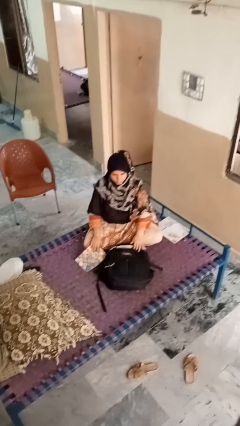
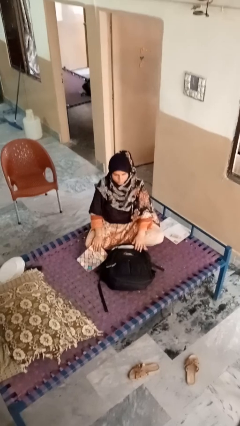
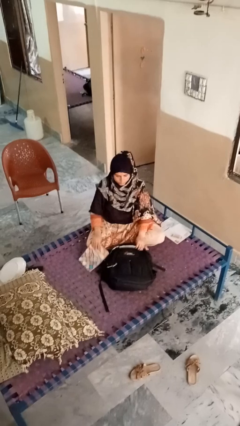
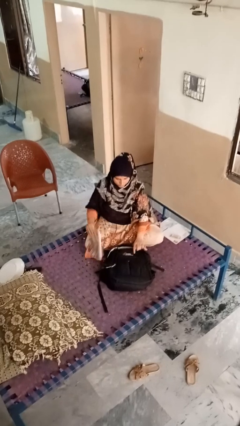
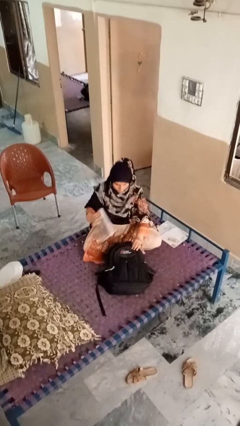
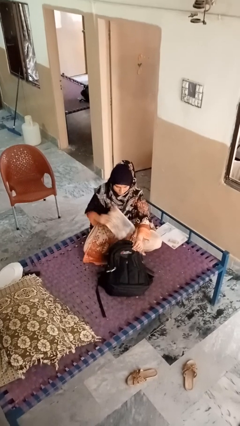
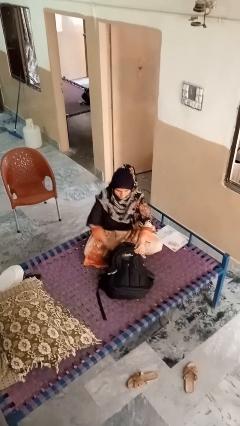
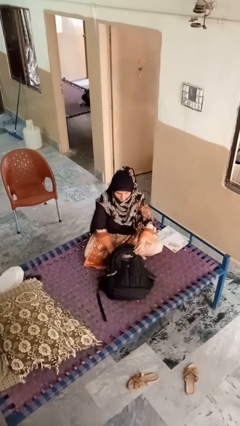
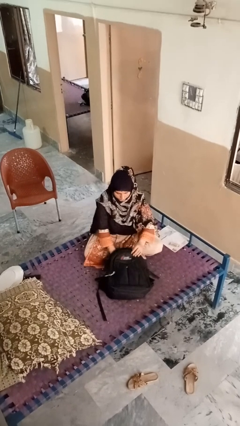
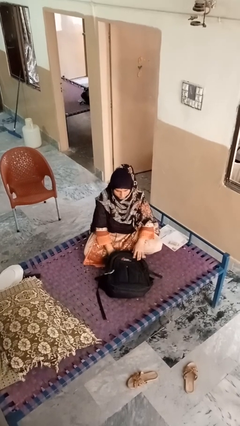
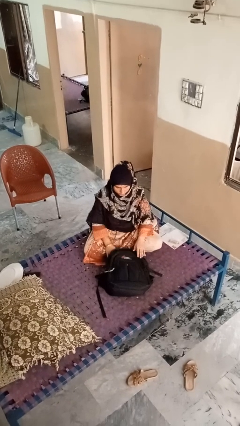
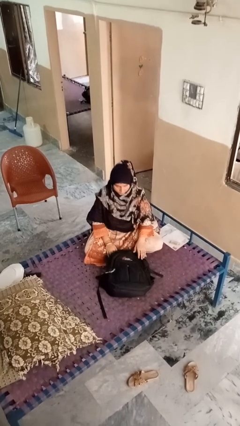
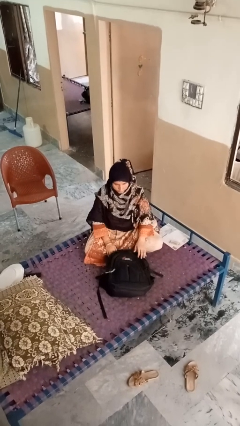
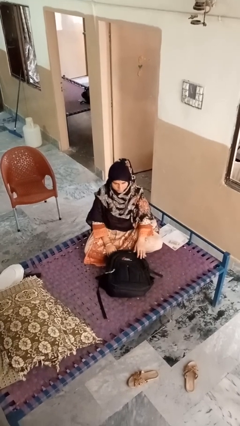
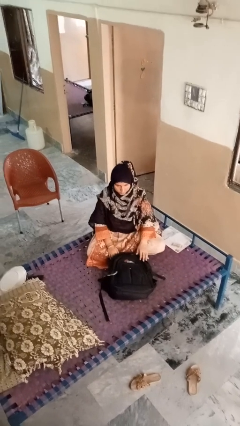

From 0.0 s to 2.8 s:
person puts object into bag

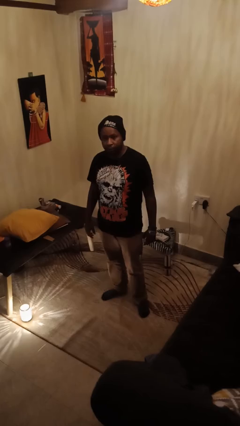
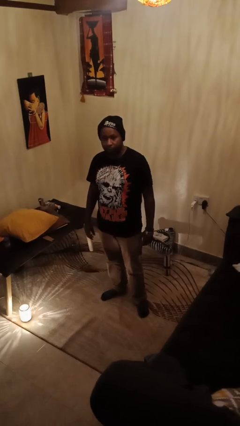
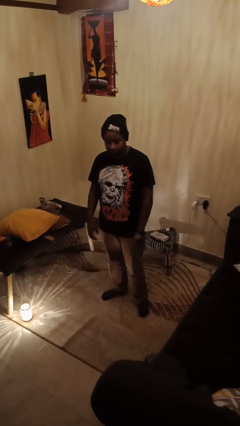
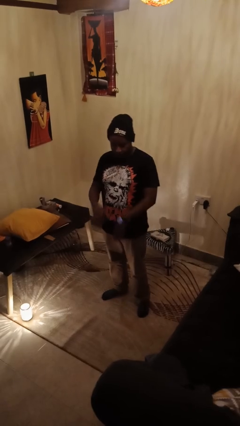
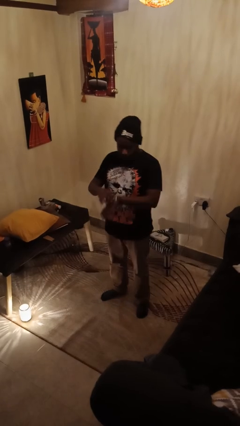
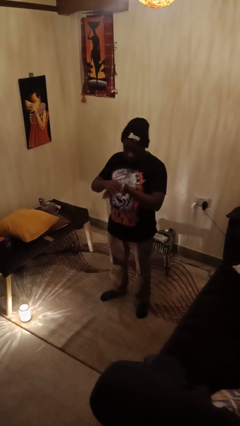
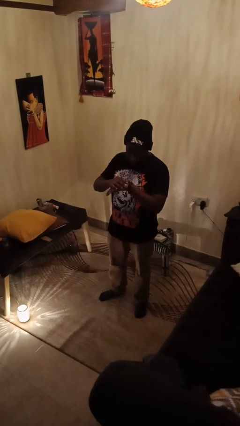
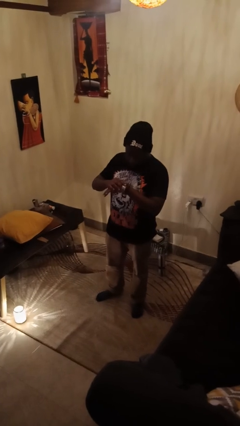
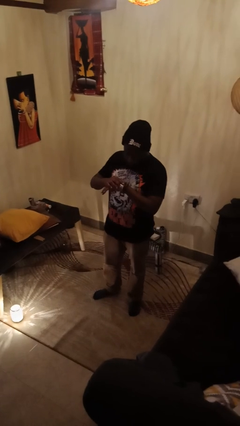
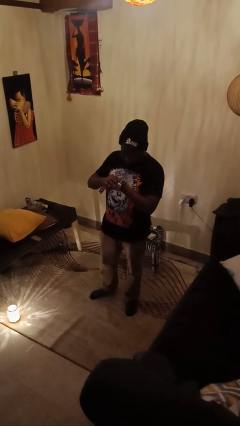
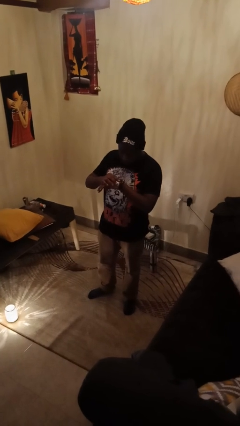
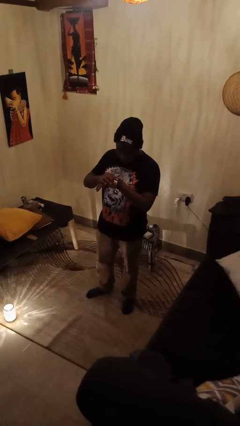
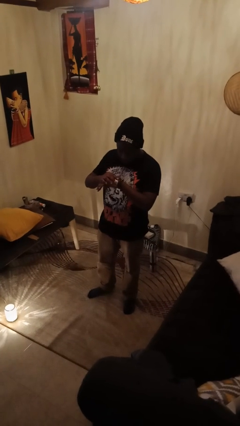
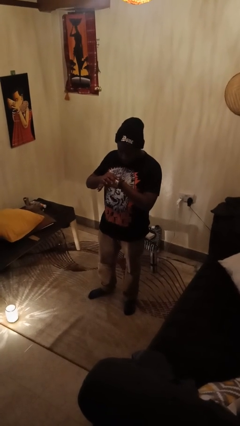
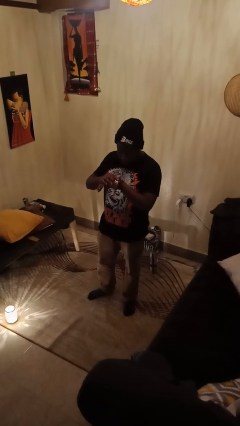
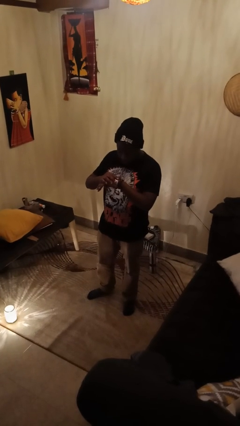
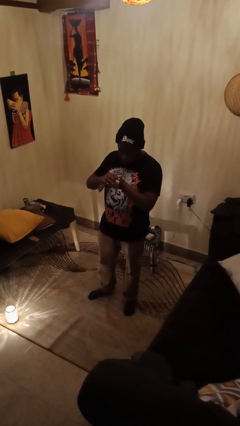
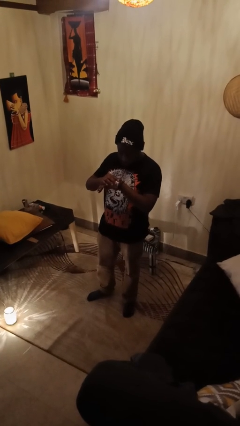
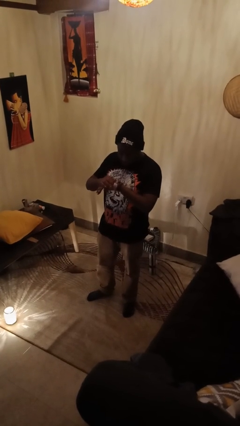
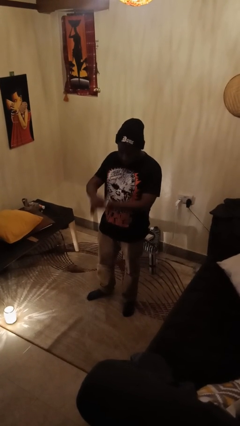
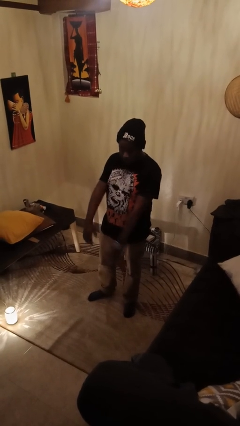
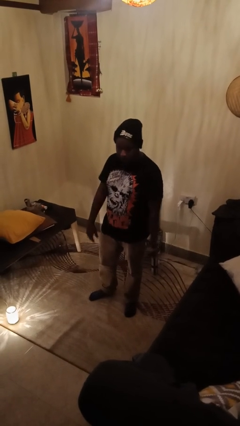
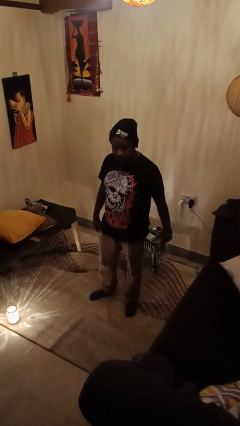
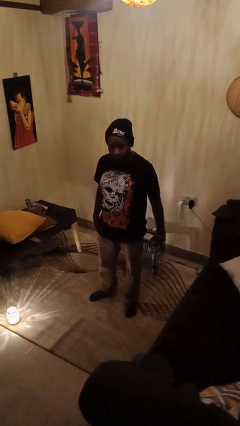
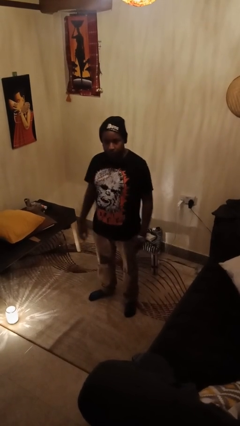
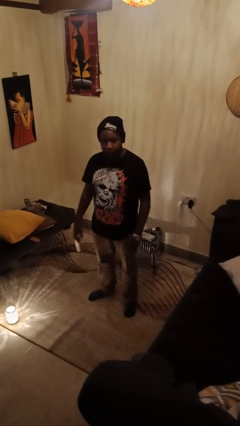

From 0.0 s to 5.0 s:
person looks at wristwatch

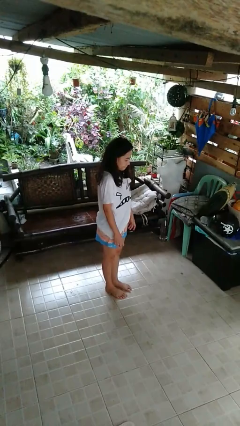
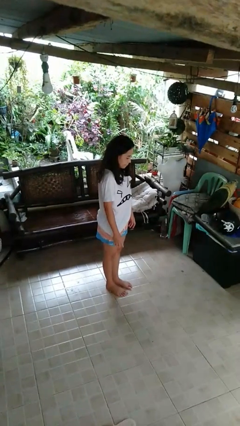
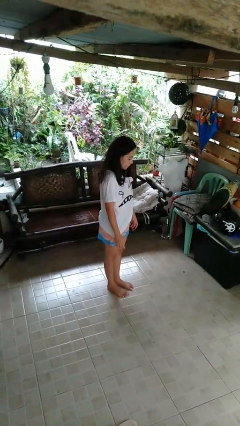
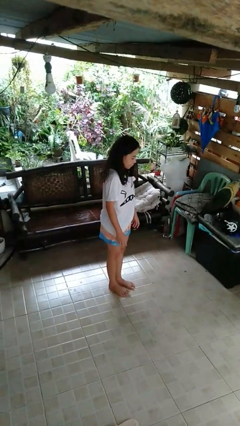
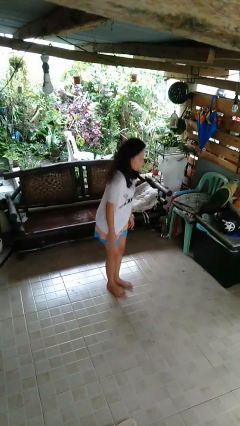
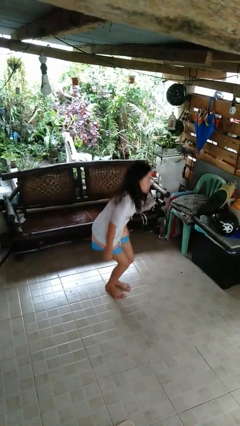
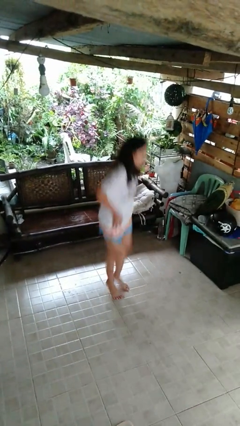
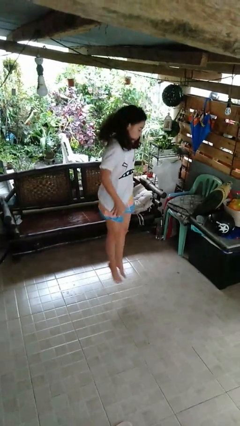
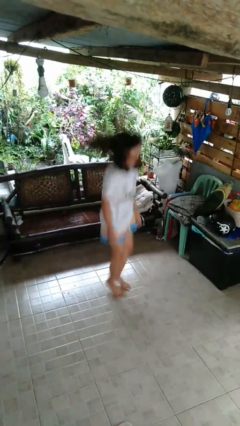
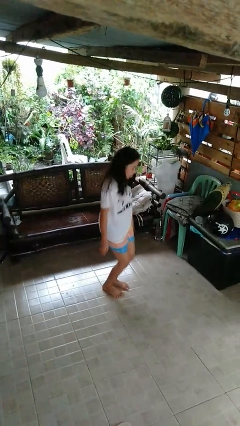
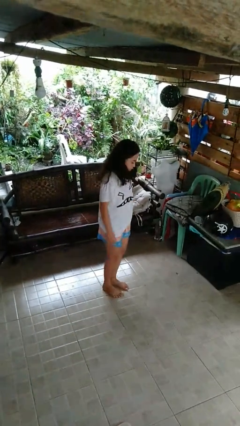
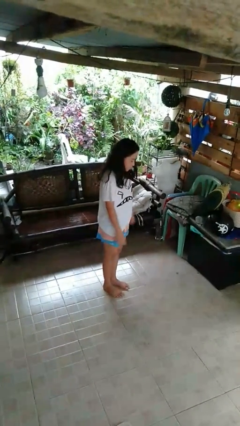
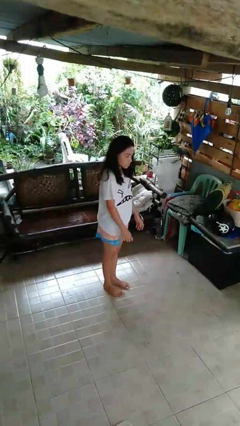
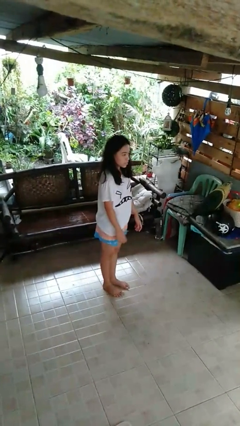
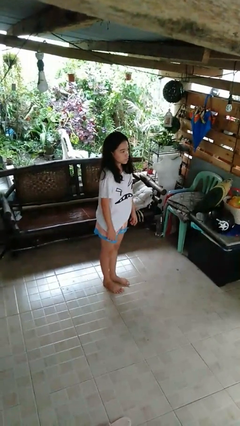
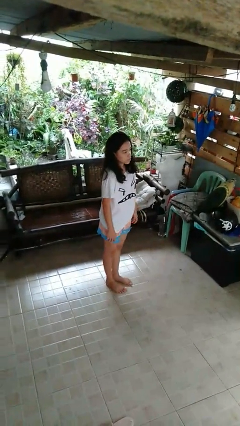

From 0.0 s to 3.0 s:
person jumps

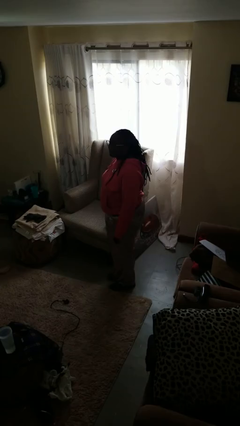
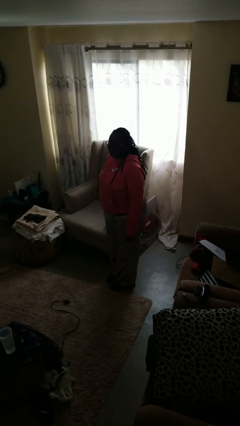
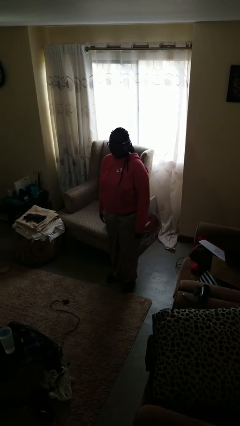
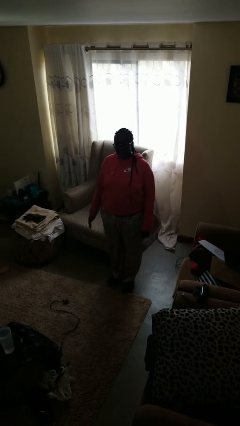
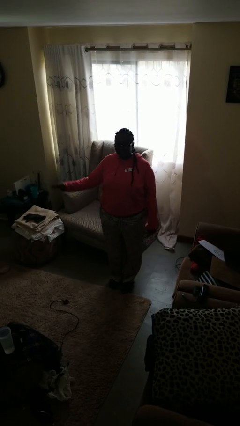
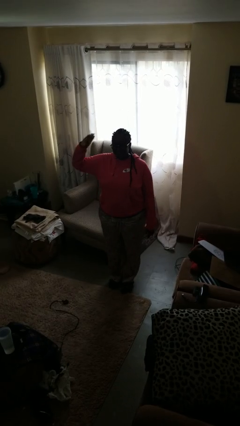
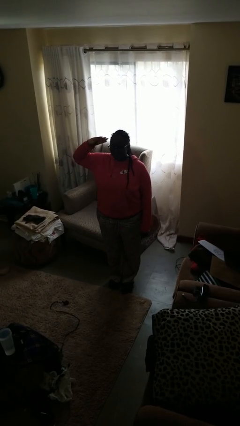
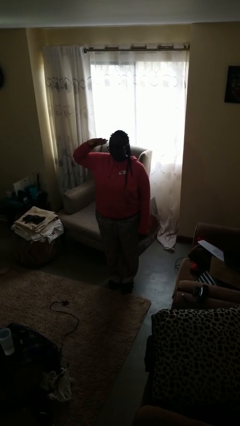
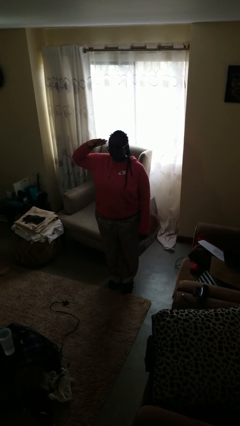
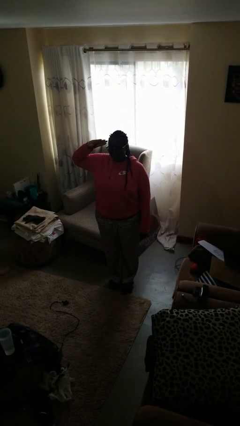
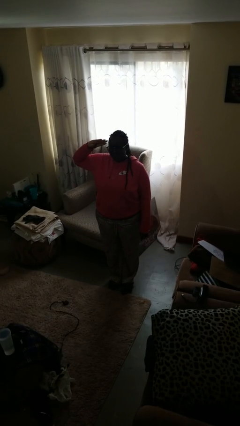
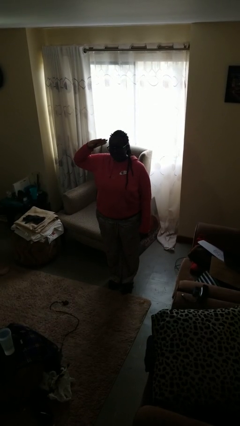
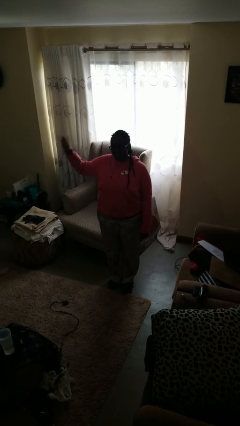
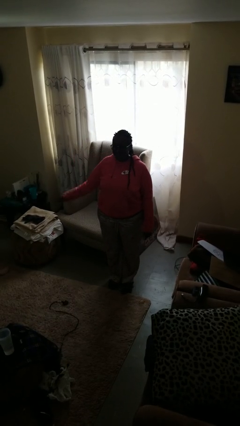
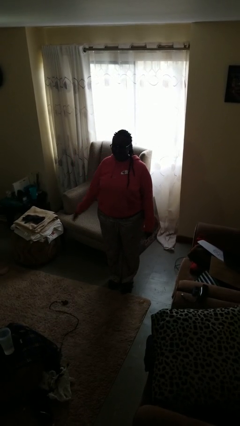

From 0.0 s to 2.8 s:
person salutes

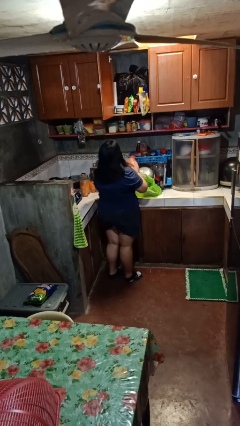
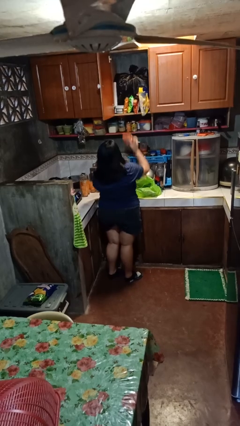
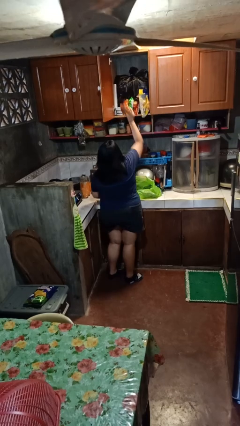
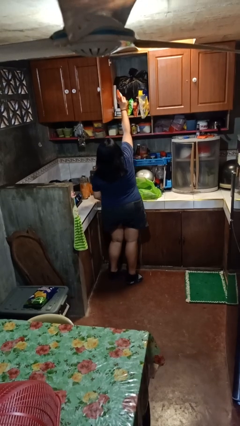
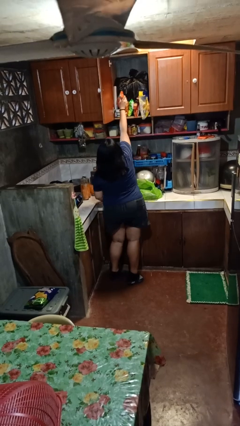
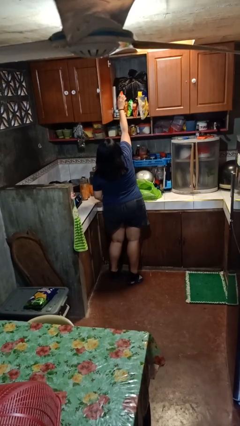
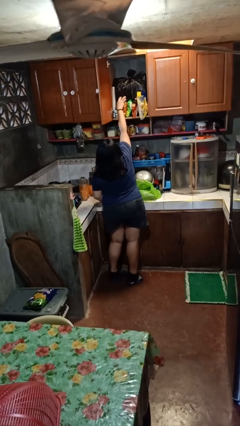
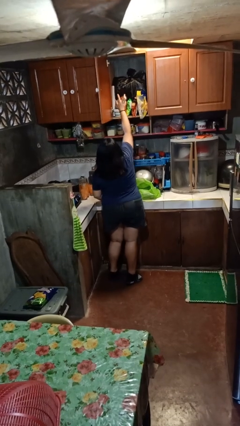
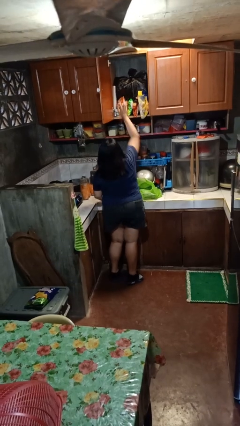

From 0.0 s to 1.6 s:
person loads groceries into cabinet

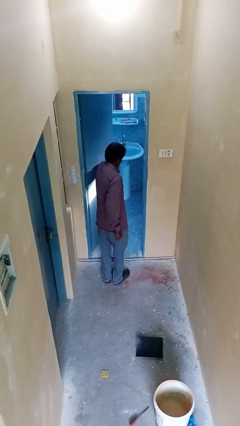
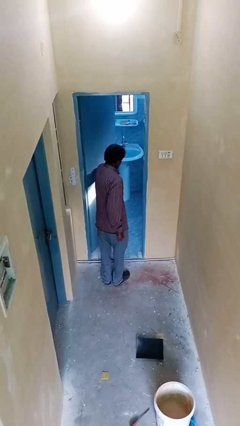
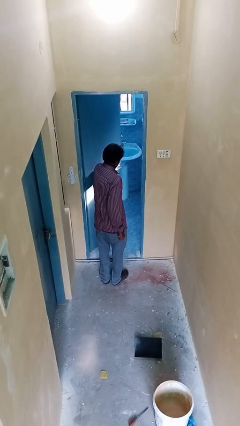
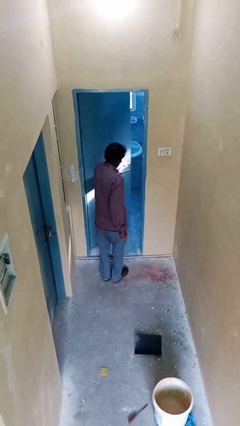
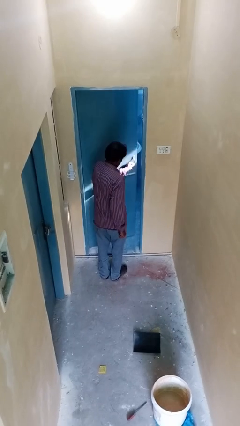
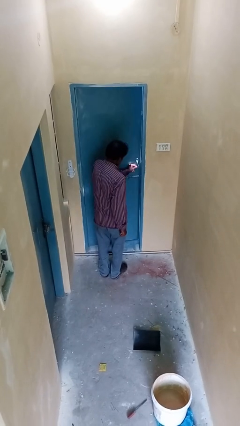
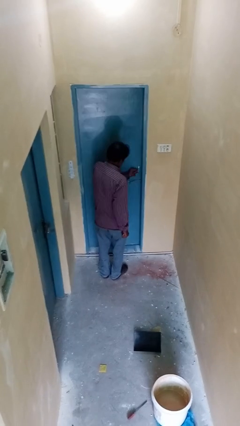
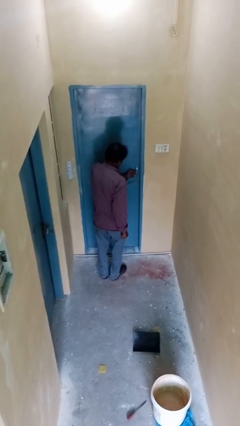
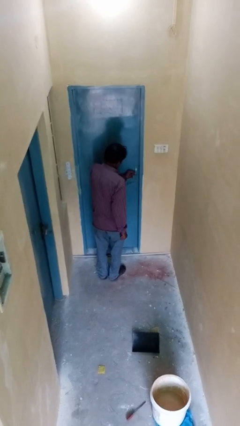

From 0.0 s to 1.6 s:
person closes facility door
